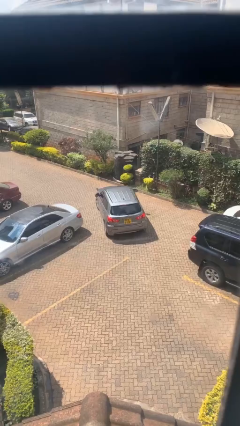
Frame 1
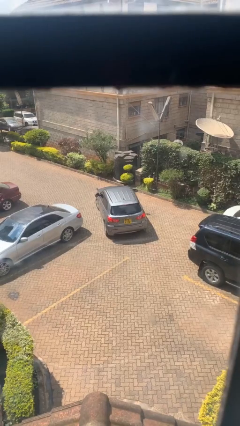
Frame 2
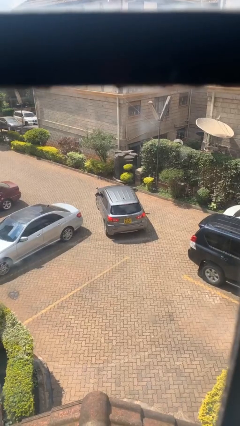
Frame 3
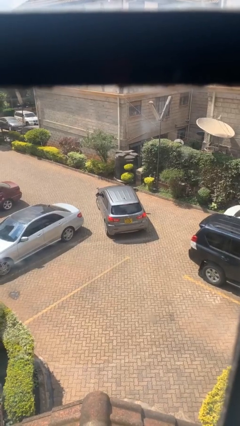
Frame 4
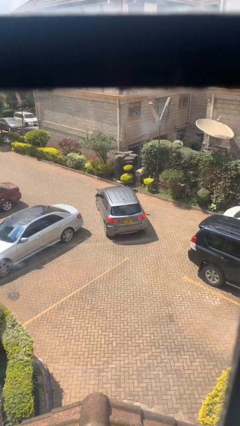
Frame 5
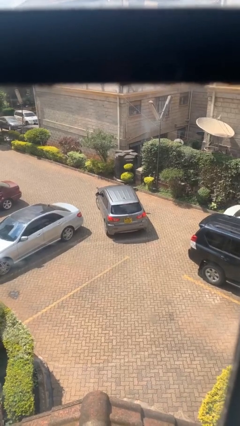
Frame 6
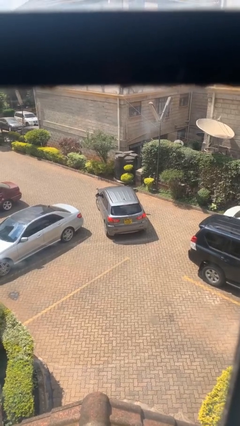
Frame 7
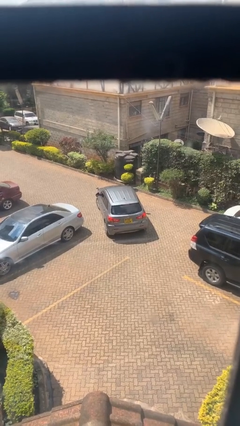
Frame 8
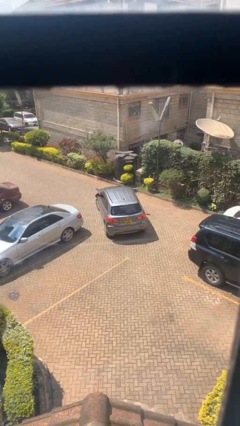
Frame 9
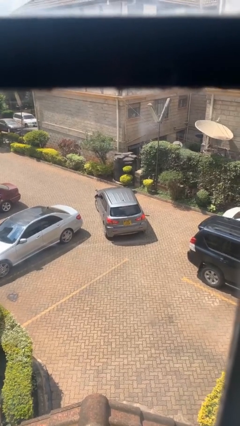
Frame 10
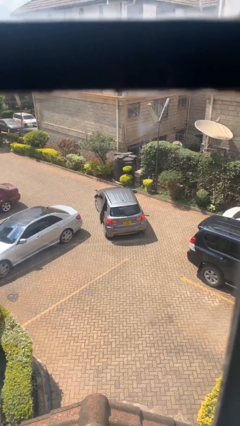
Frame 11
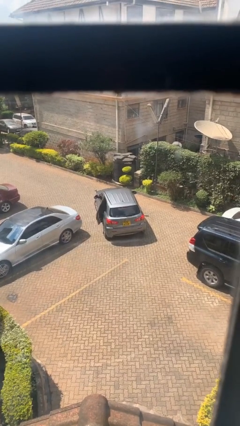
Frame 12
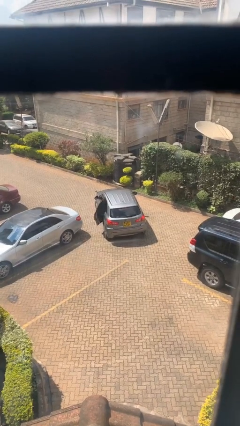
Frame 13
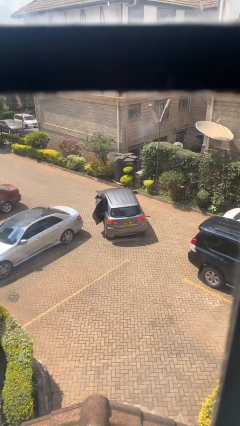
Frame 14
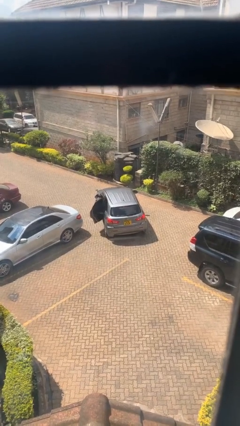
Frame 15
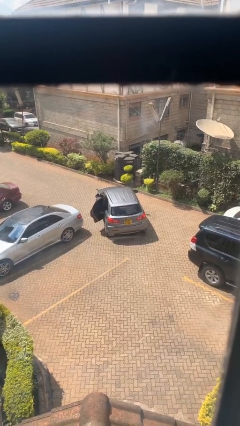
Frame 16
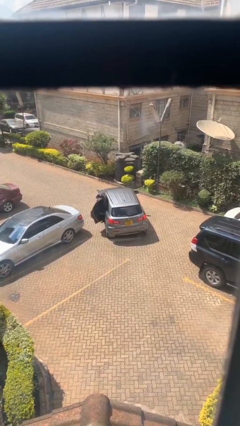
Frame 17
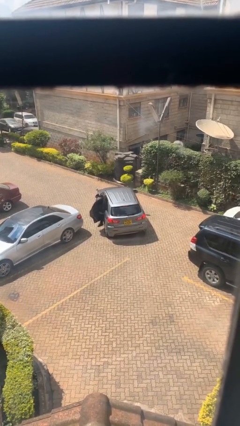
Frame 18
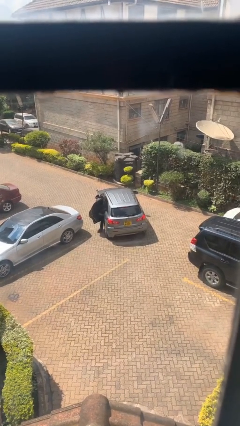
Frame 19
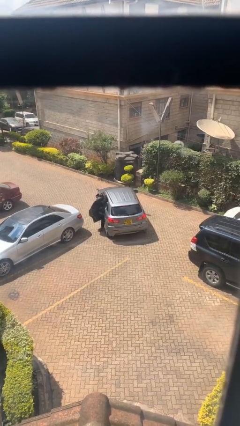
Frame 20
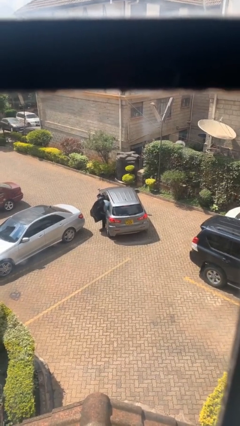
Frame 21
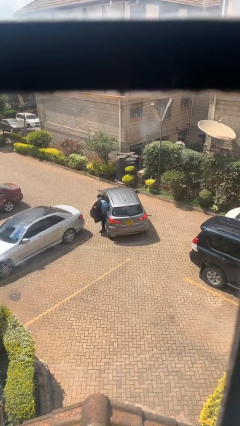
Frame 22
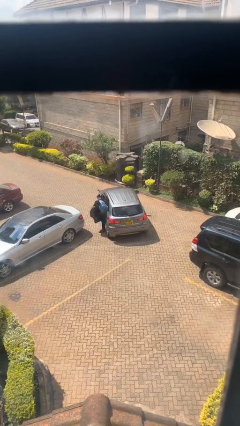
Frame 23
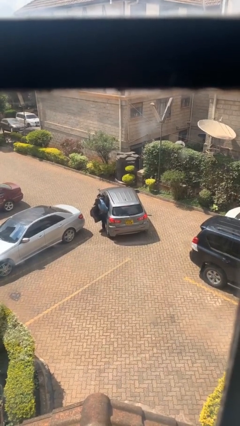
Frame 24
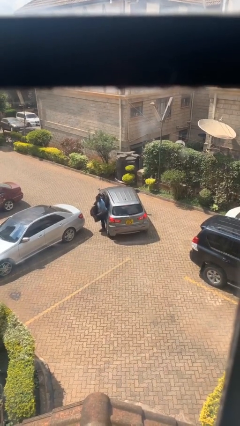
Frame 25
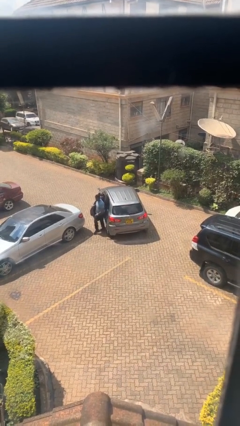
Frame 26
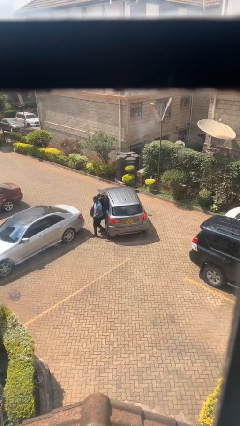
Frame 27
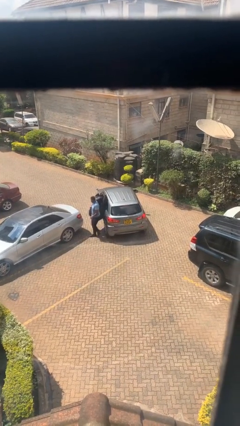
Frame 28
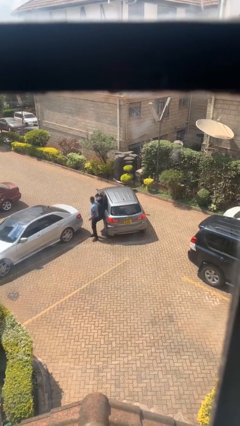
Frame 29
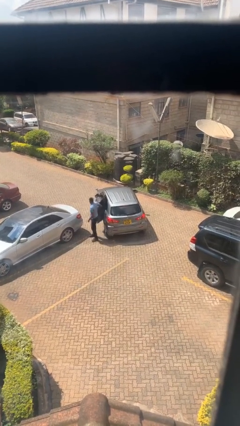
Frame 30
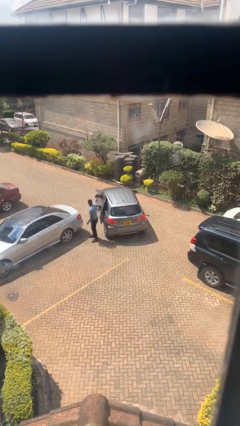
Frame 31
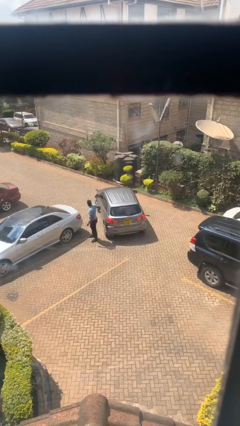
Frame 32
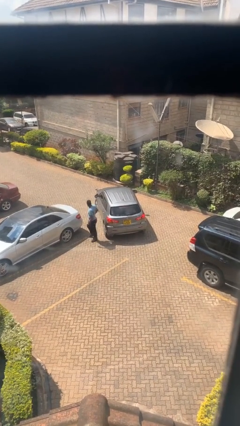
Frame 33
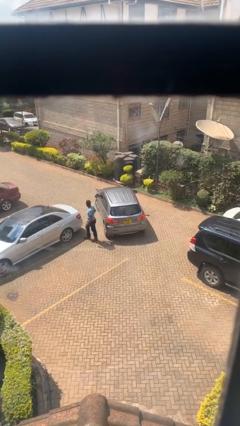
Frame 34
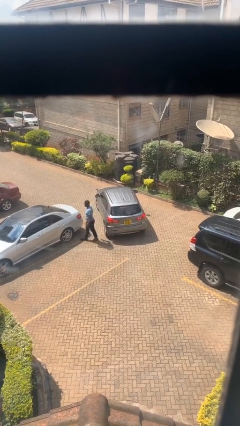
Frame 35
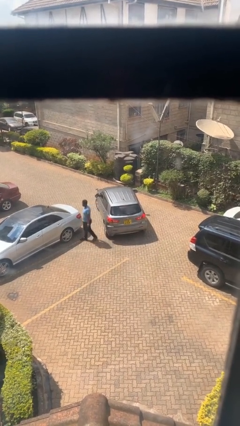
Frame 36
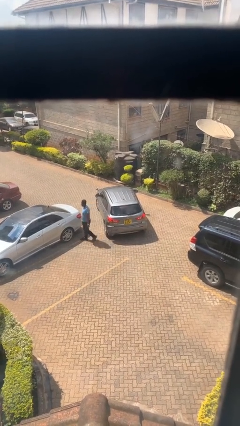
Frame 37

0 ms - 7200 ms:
car drops off person

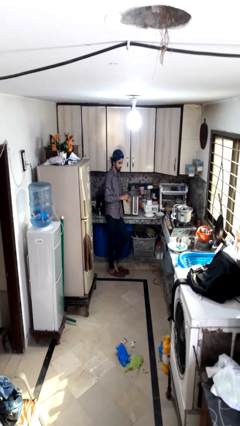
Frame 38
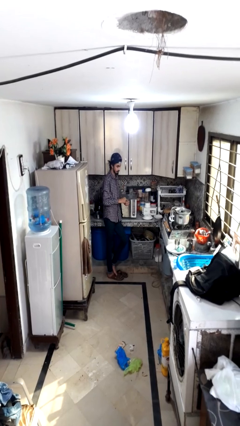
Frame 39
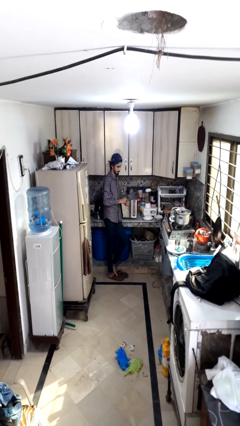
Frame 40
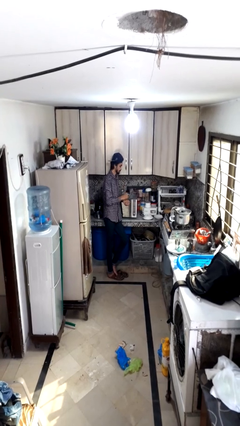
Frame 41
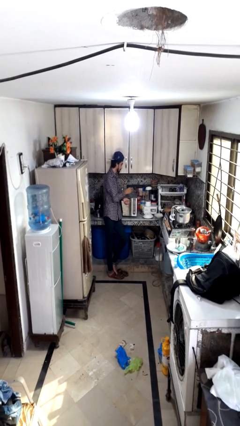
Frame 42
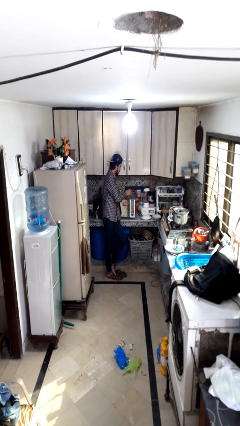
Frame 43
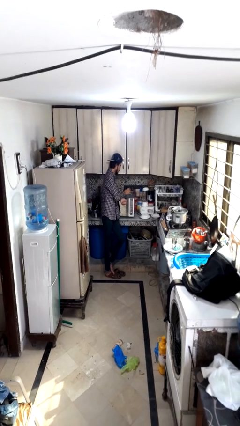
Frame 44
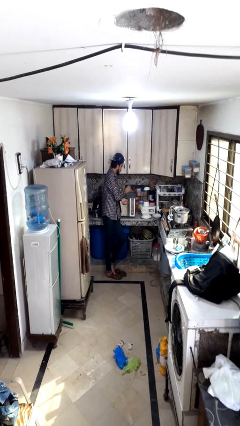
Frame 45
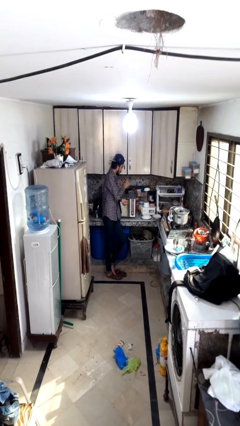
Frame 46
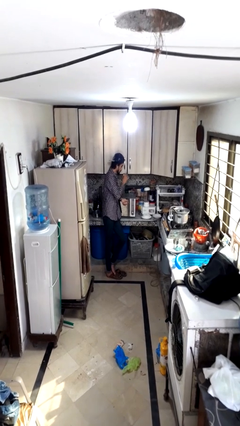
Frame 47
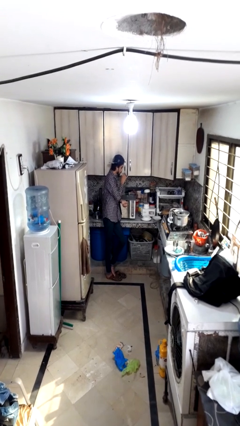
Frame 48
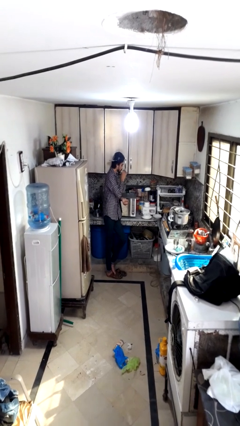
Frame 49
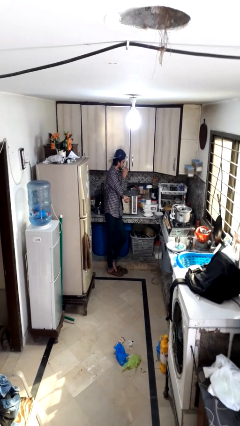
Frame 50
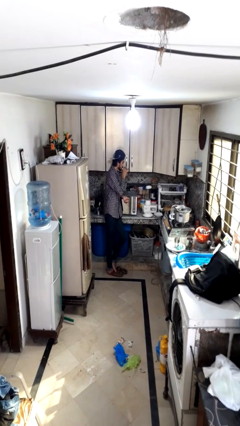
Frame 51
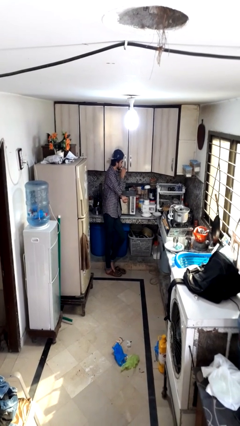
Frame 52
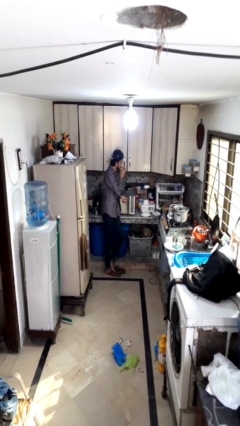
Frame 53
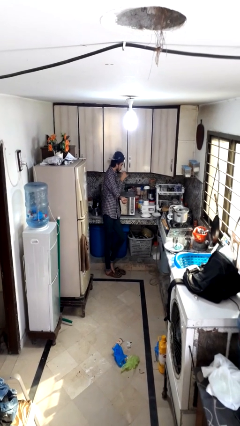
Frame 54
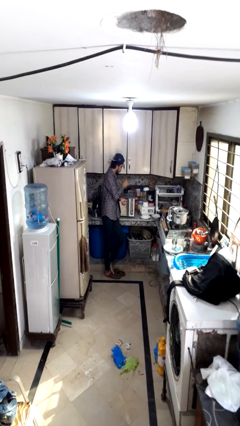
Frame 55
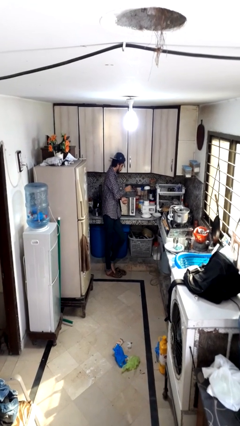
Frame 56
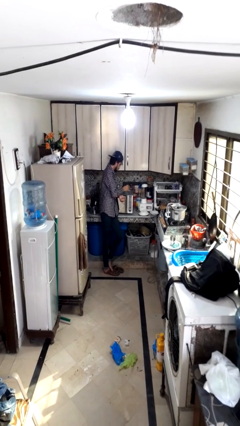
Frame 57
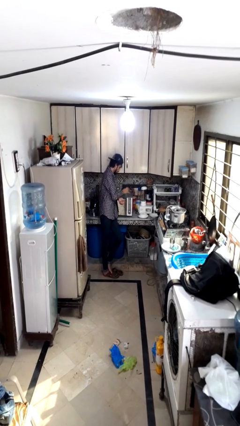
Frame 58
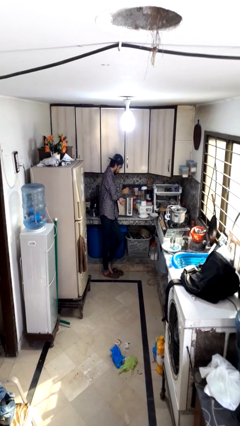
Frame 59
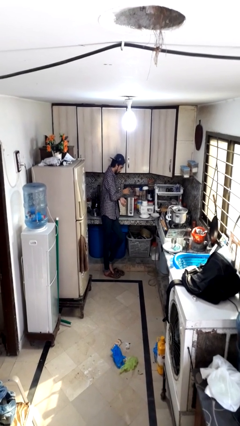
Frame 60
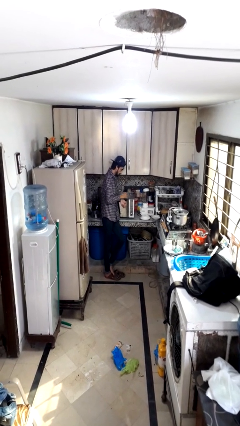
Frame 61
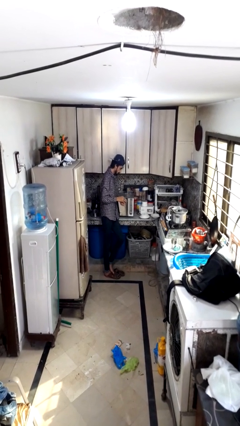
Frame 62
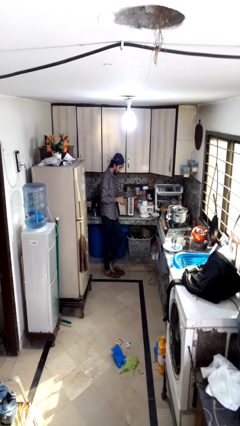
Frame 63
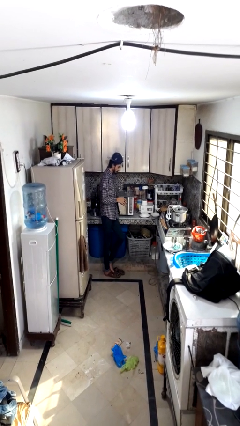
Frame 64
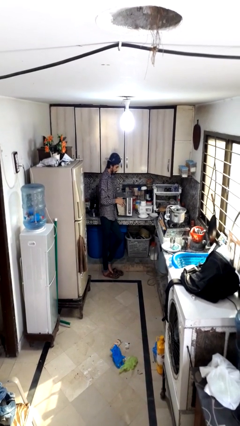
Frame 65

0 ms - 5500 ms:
person drinks from cup

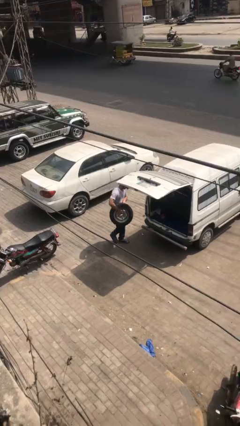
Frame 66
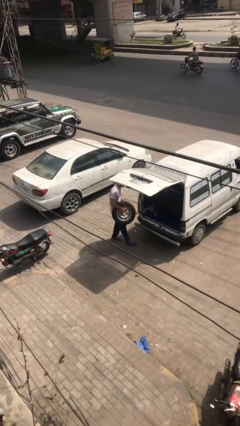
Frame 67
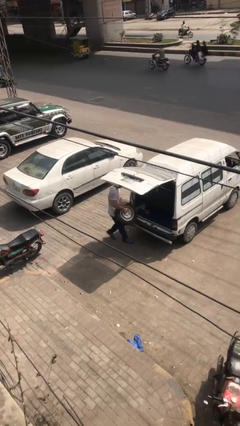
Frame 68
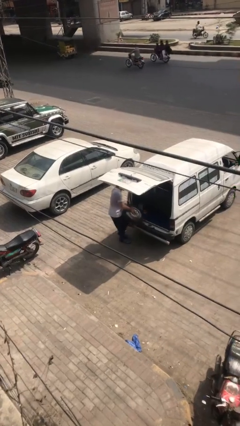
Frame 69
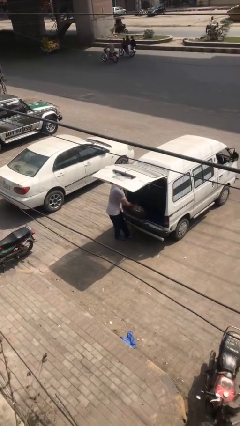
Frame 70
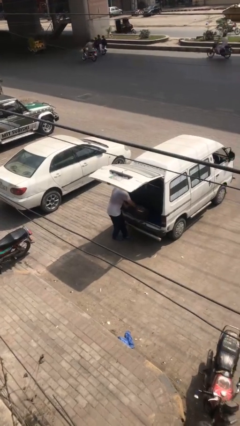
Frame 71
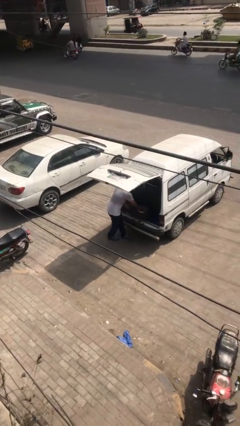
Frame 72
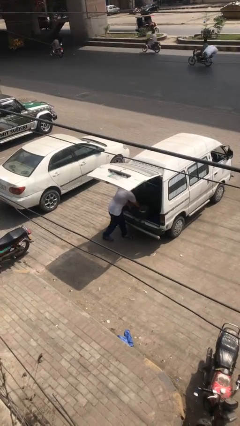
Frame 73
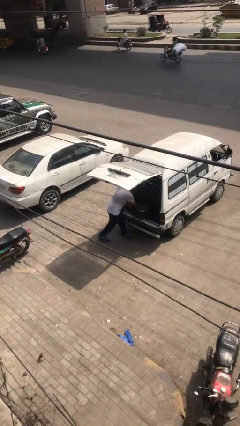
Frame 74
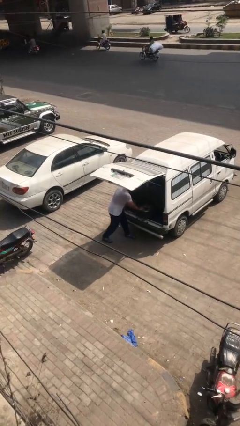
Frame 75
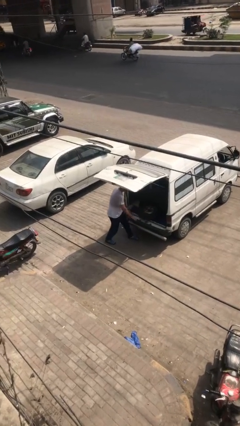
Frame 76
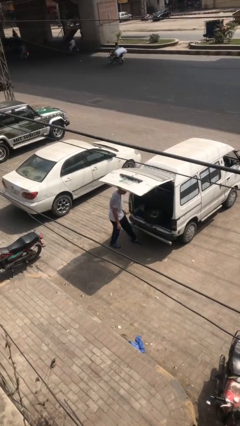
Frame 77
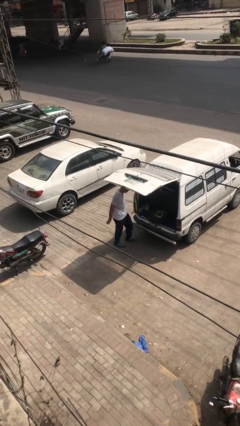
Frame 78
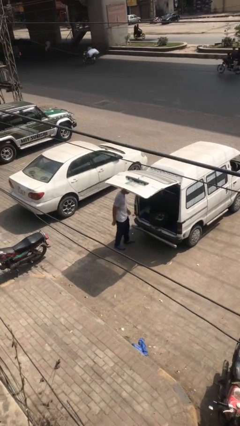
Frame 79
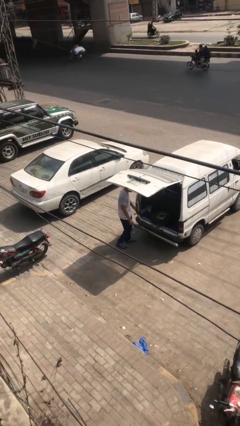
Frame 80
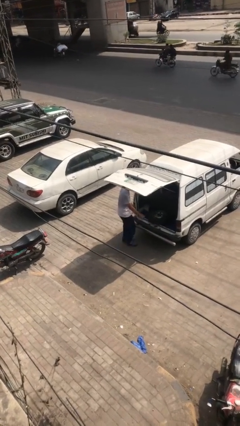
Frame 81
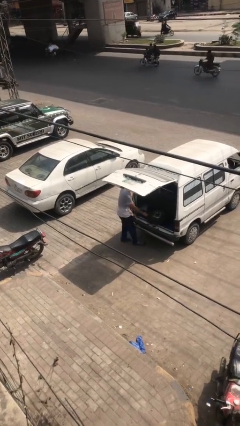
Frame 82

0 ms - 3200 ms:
person loads car

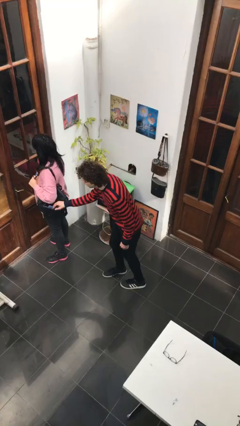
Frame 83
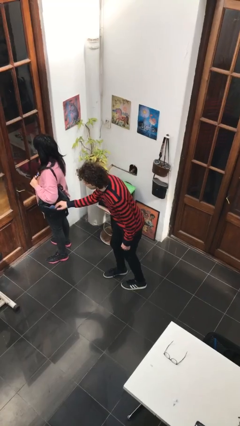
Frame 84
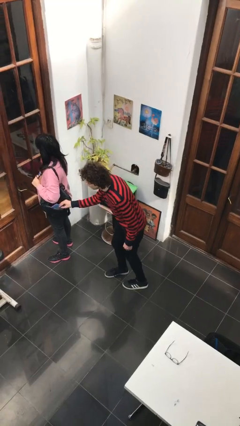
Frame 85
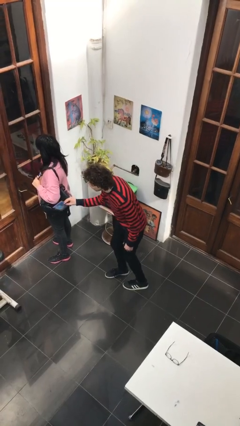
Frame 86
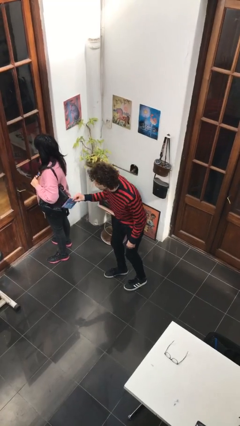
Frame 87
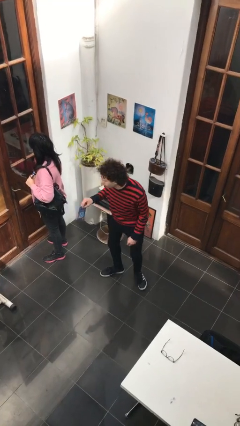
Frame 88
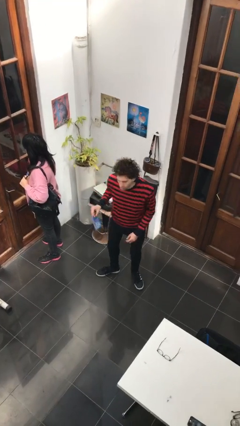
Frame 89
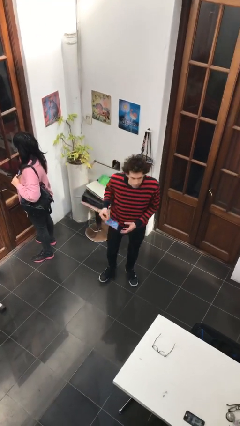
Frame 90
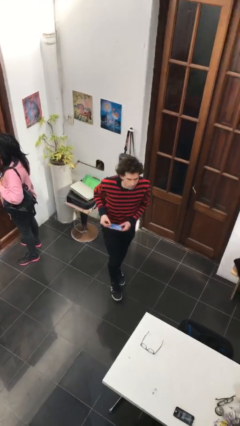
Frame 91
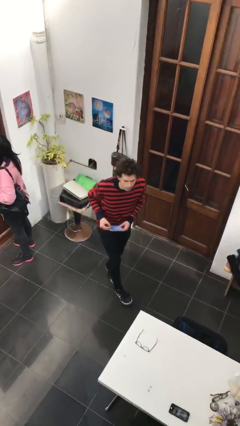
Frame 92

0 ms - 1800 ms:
person steals object from person

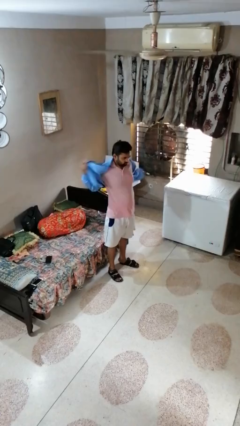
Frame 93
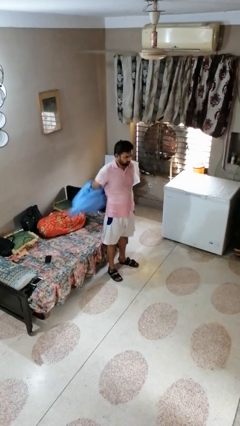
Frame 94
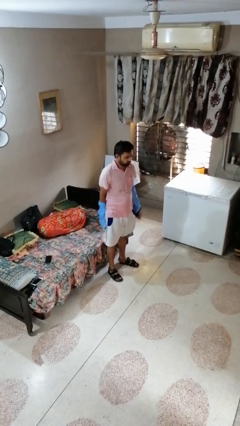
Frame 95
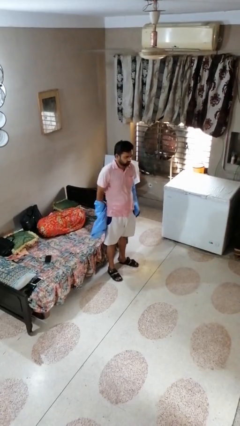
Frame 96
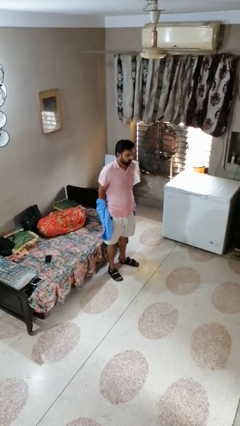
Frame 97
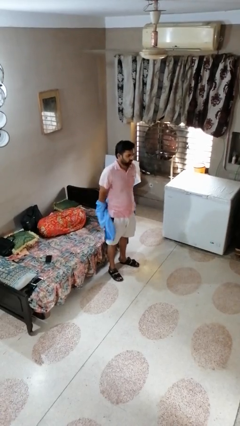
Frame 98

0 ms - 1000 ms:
person takes off jacket
